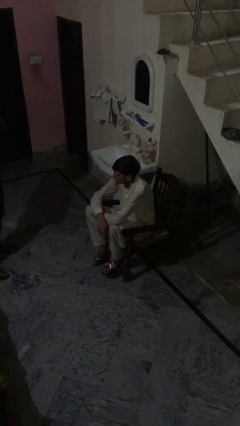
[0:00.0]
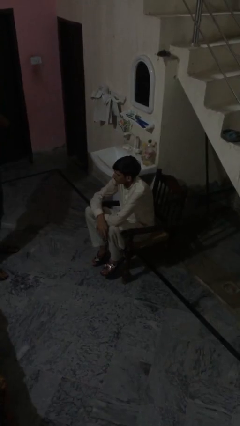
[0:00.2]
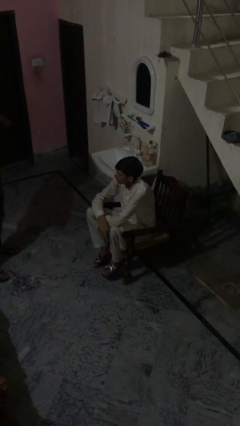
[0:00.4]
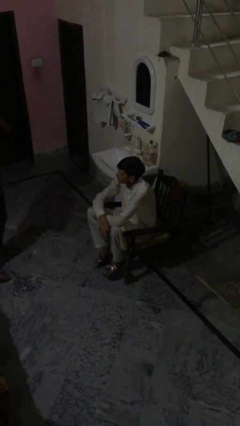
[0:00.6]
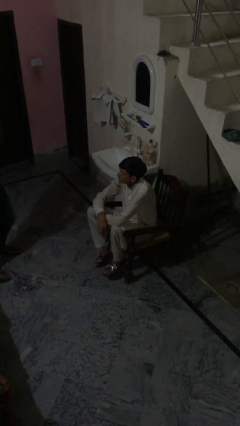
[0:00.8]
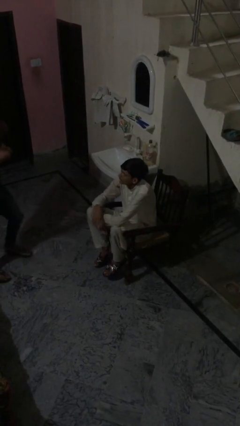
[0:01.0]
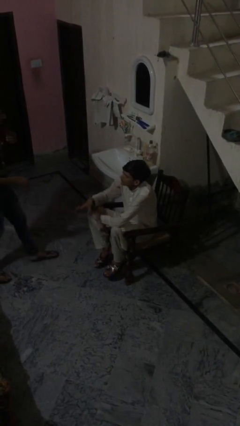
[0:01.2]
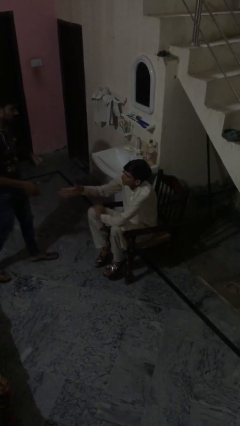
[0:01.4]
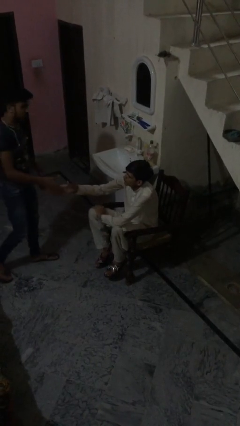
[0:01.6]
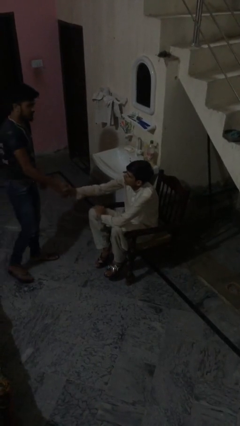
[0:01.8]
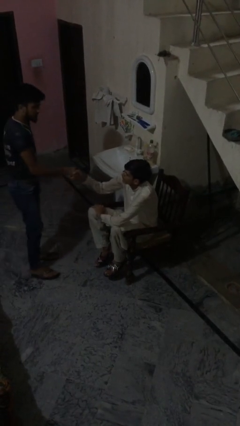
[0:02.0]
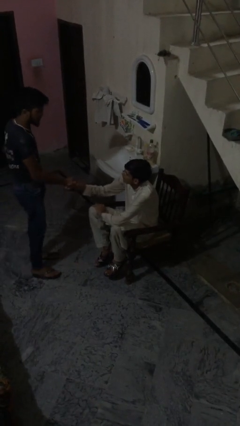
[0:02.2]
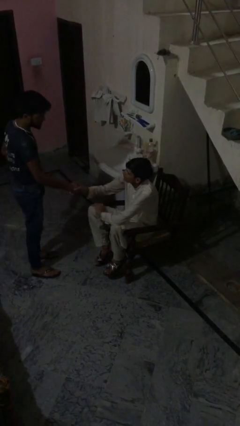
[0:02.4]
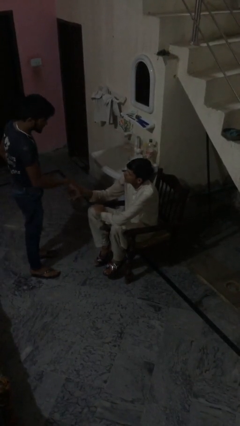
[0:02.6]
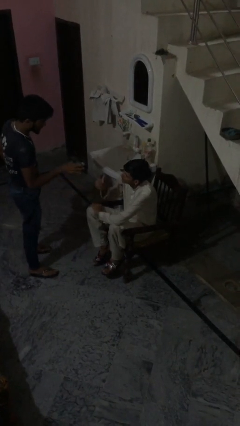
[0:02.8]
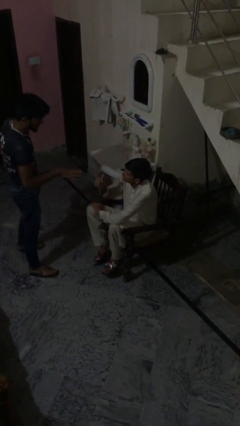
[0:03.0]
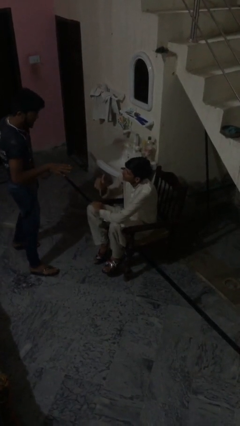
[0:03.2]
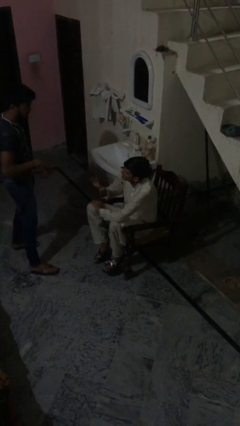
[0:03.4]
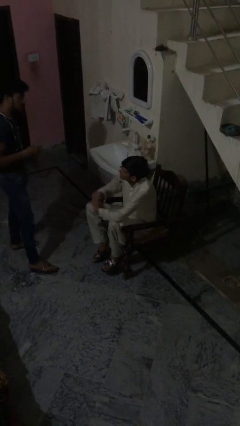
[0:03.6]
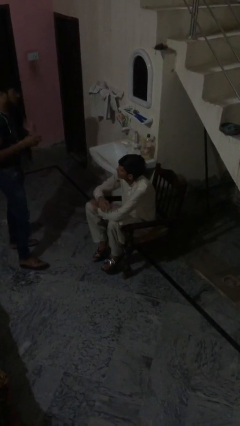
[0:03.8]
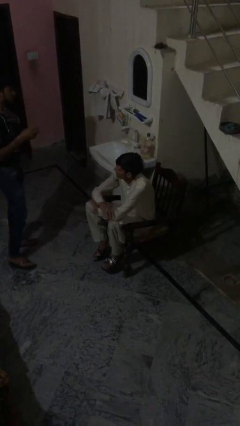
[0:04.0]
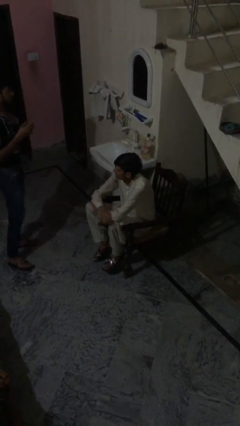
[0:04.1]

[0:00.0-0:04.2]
person shakes hand

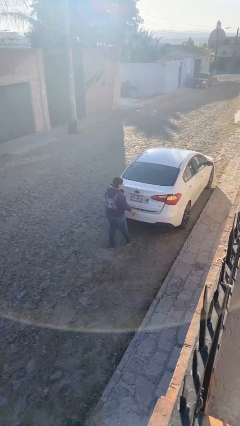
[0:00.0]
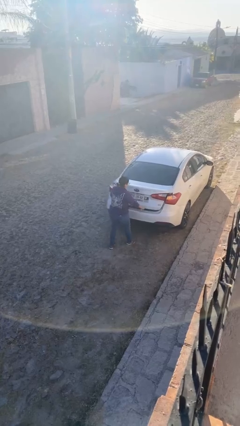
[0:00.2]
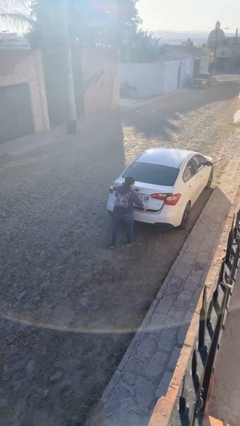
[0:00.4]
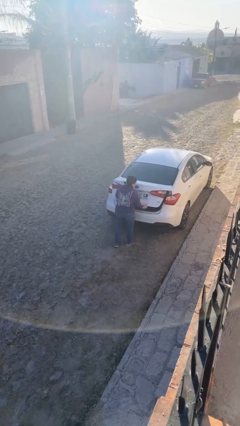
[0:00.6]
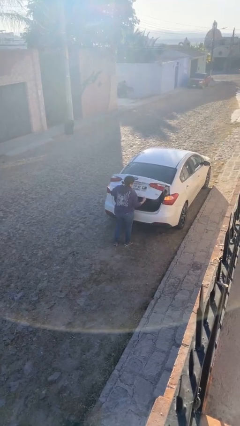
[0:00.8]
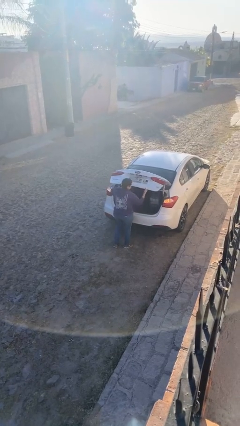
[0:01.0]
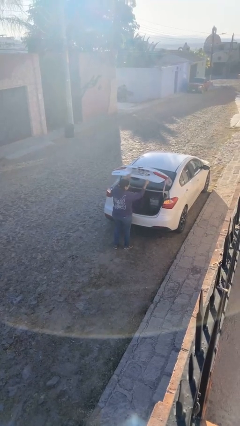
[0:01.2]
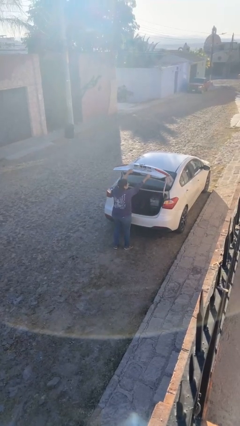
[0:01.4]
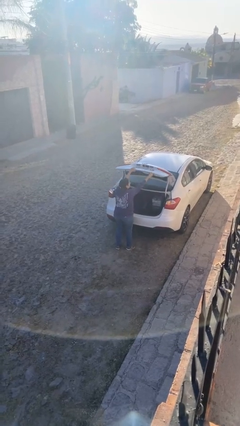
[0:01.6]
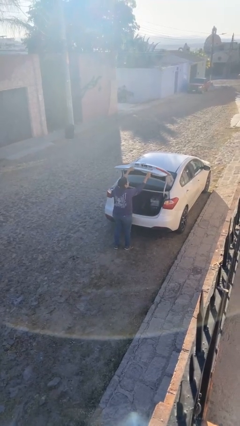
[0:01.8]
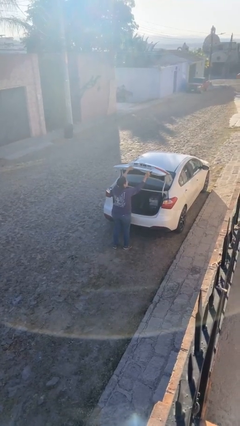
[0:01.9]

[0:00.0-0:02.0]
person opens car trunk

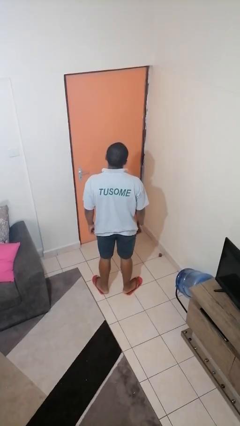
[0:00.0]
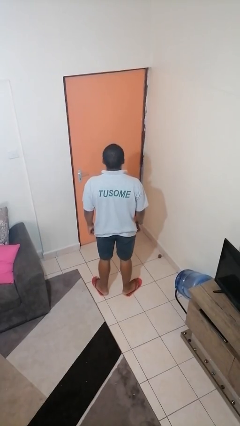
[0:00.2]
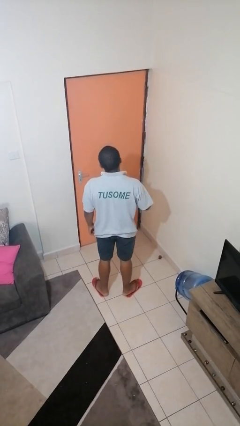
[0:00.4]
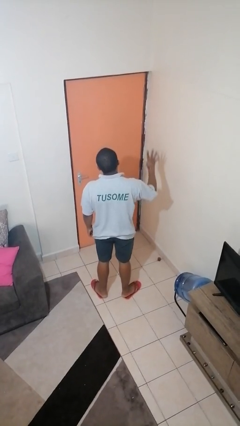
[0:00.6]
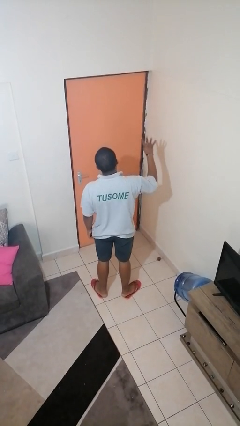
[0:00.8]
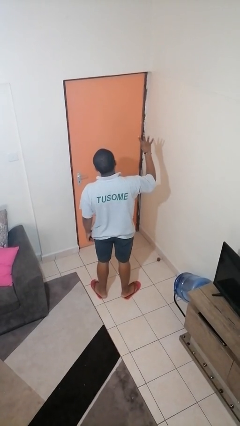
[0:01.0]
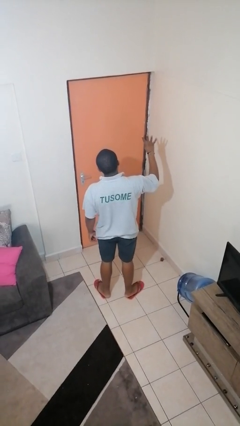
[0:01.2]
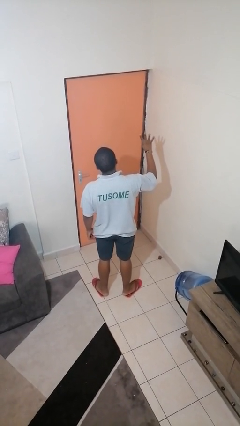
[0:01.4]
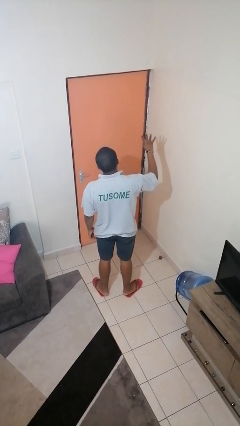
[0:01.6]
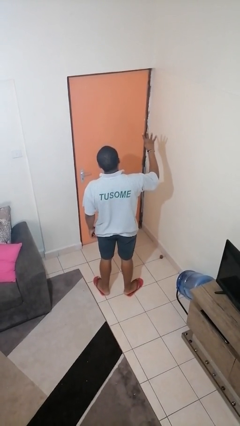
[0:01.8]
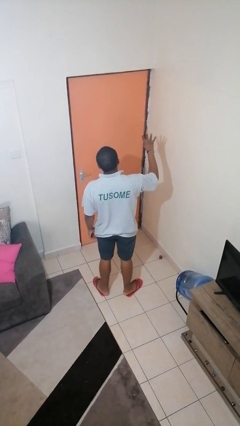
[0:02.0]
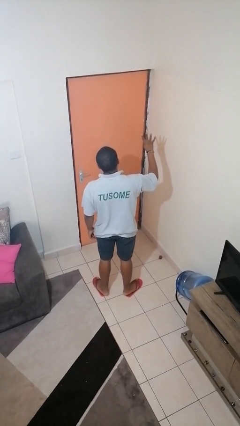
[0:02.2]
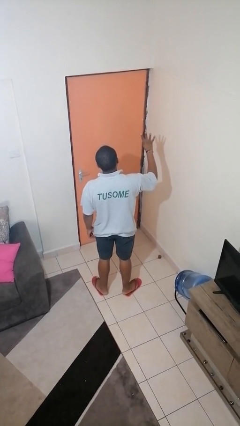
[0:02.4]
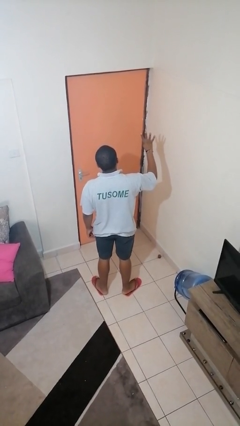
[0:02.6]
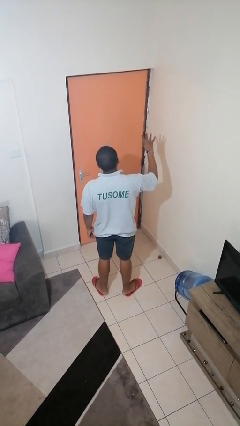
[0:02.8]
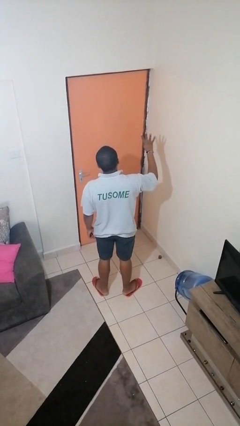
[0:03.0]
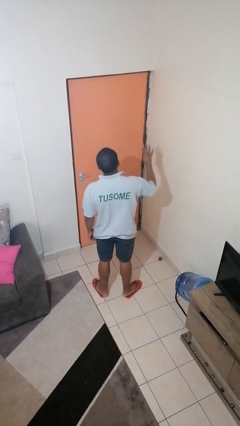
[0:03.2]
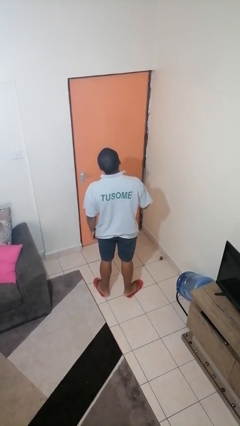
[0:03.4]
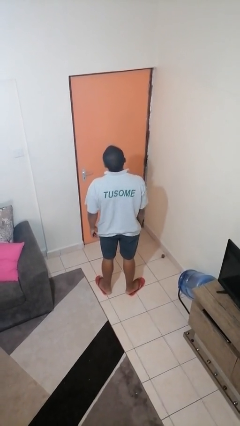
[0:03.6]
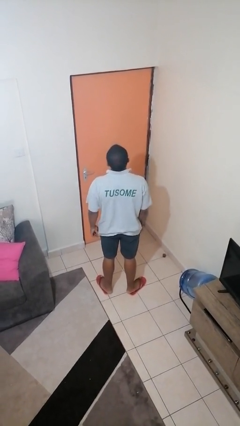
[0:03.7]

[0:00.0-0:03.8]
person gestures number four

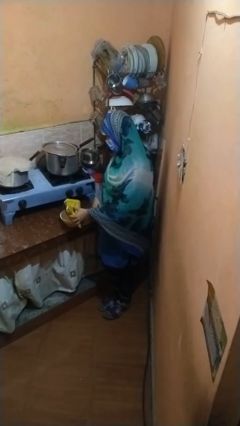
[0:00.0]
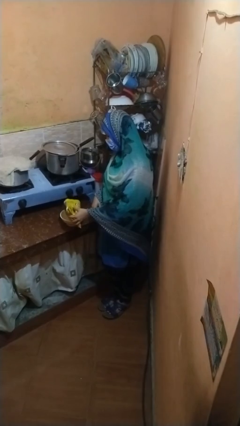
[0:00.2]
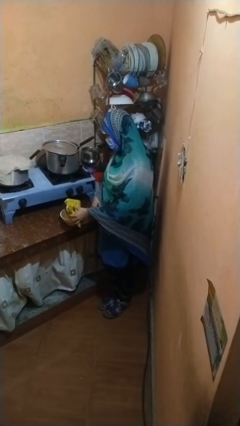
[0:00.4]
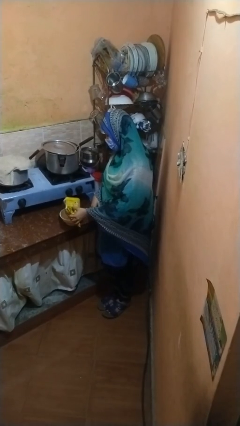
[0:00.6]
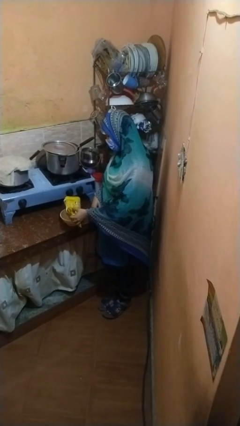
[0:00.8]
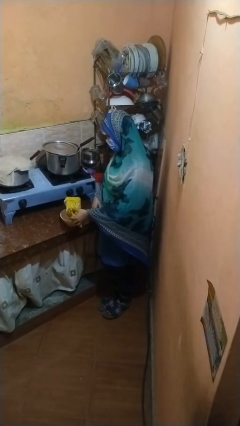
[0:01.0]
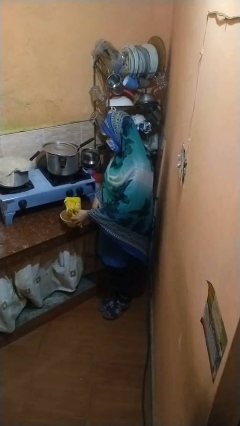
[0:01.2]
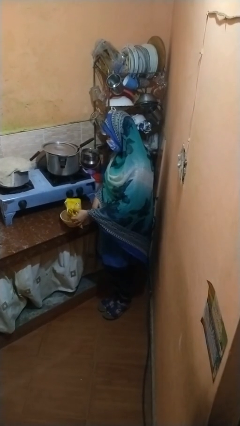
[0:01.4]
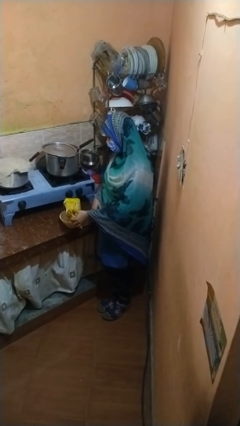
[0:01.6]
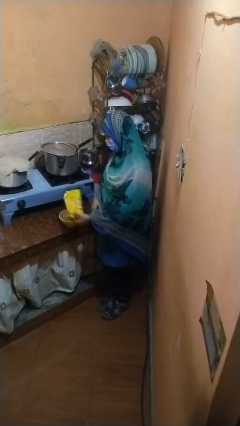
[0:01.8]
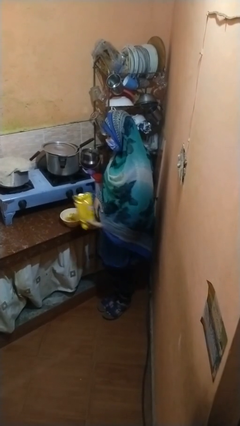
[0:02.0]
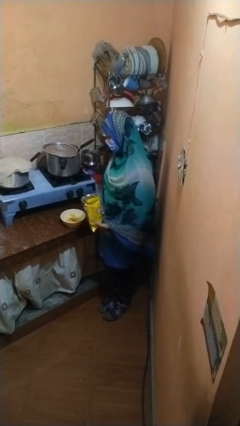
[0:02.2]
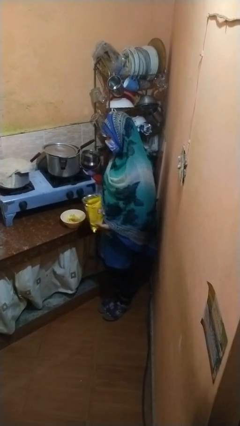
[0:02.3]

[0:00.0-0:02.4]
person pours into bowl

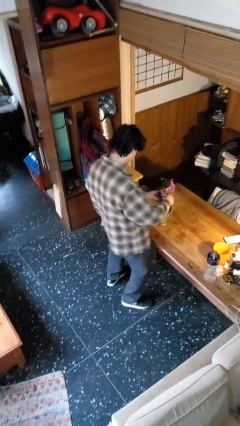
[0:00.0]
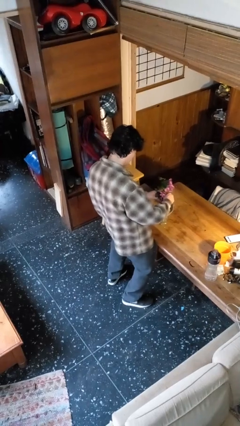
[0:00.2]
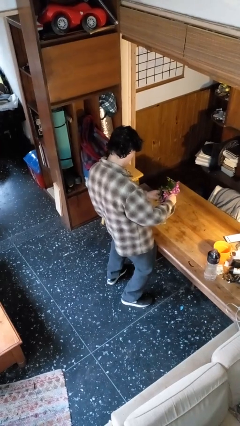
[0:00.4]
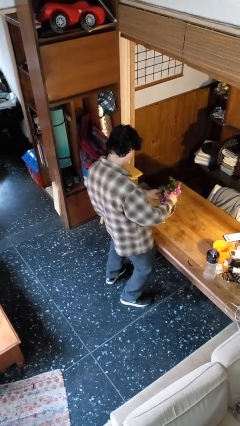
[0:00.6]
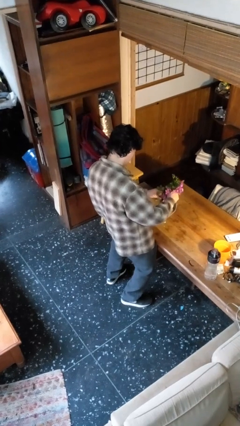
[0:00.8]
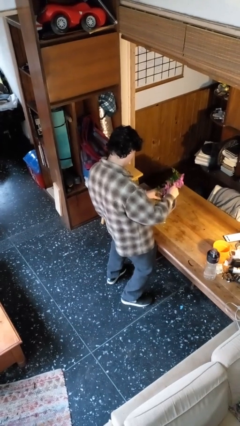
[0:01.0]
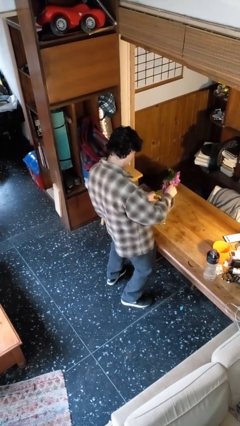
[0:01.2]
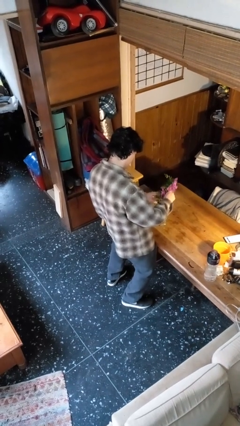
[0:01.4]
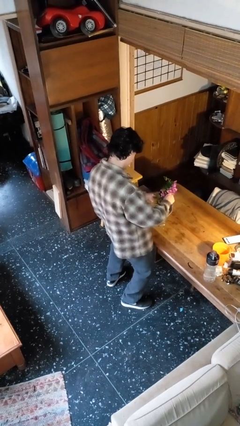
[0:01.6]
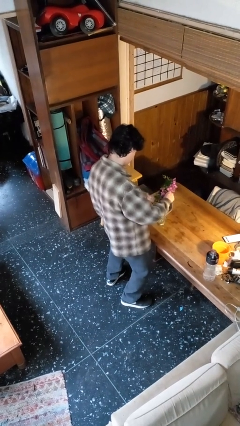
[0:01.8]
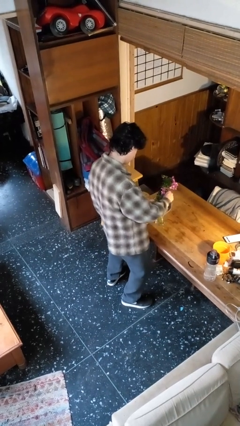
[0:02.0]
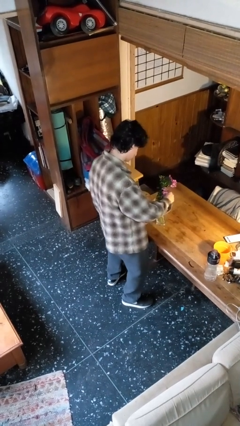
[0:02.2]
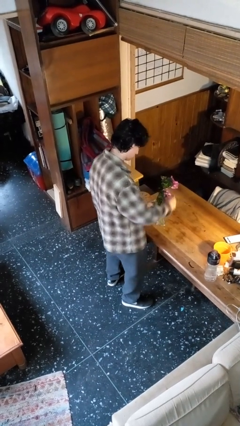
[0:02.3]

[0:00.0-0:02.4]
person arranges flowers in vase

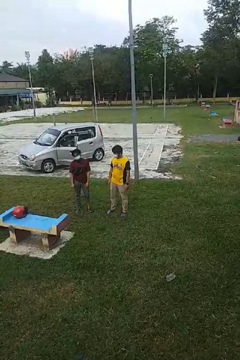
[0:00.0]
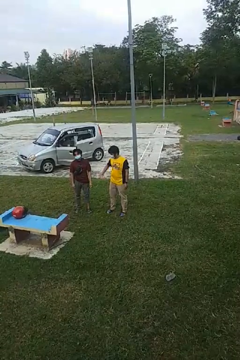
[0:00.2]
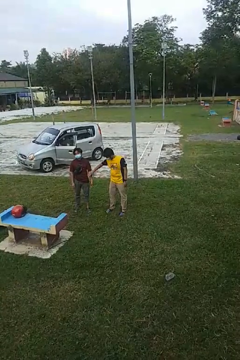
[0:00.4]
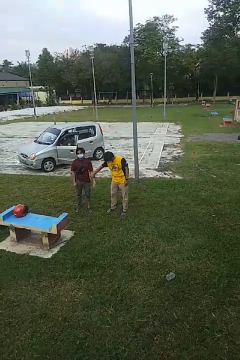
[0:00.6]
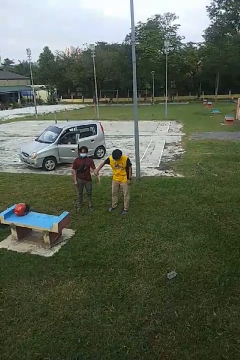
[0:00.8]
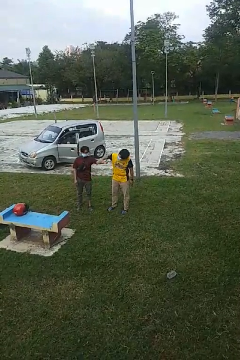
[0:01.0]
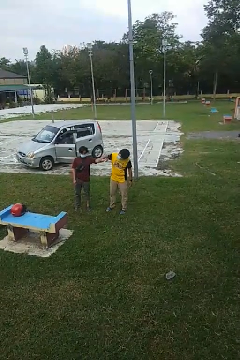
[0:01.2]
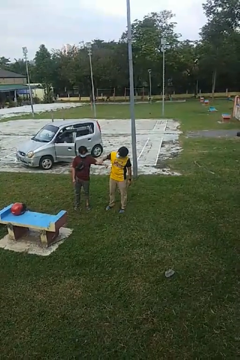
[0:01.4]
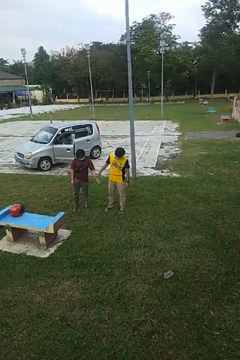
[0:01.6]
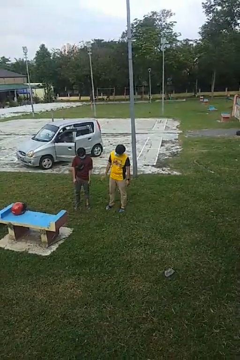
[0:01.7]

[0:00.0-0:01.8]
person grabs person by forearm

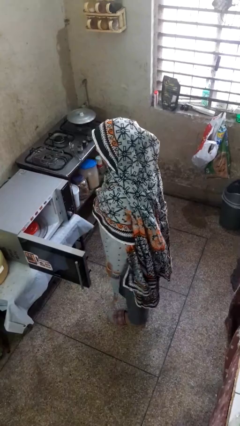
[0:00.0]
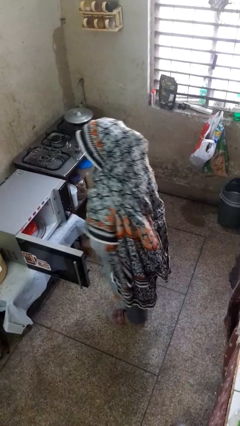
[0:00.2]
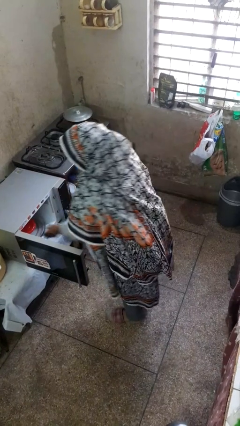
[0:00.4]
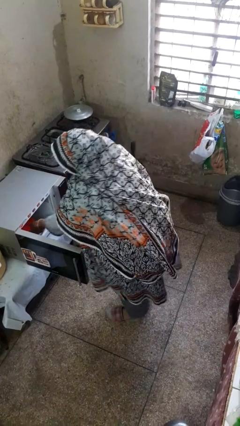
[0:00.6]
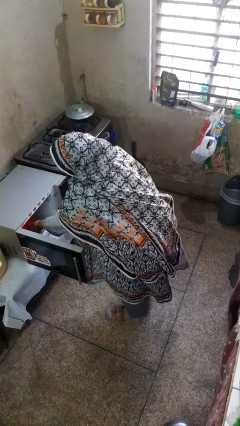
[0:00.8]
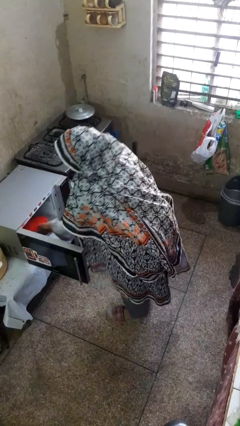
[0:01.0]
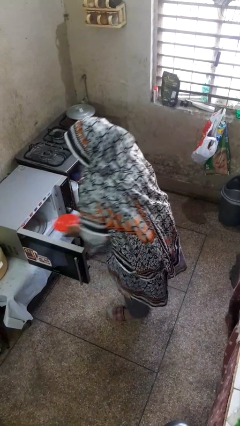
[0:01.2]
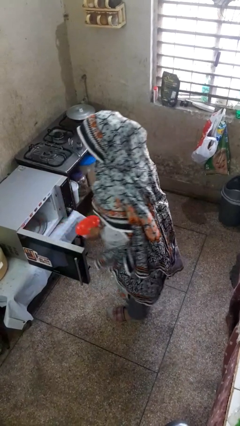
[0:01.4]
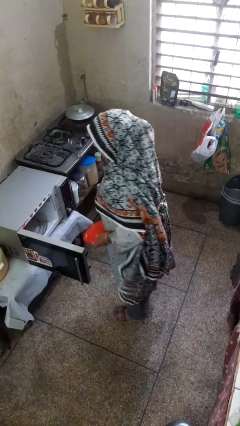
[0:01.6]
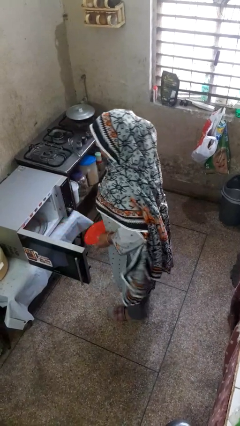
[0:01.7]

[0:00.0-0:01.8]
person takes object from microwave
